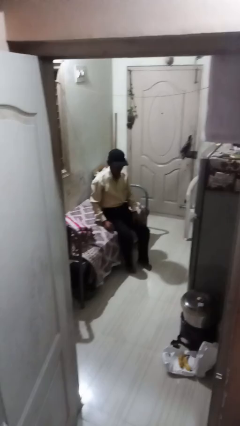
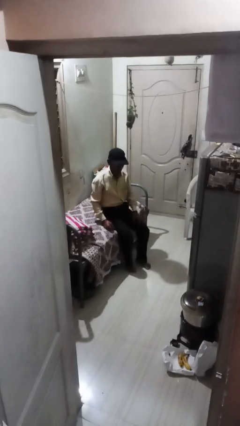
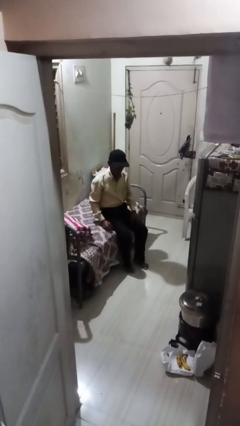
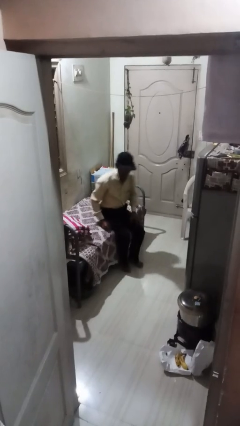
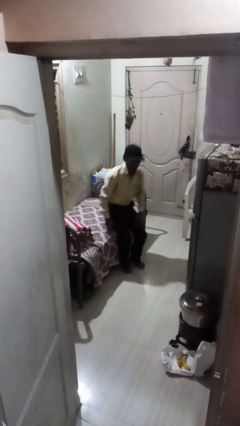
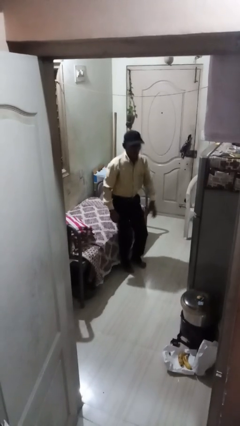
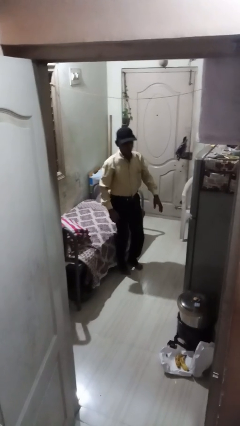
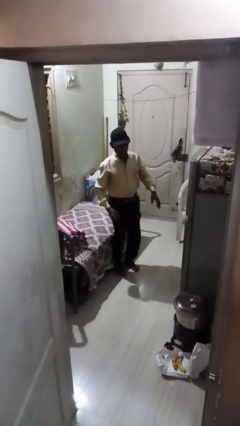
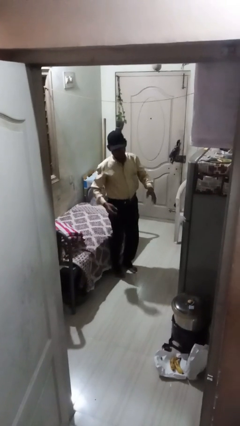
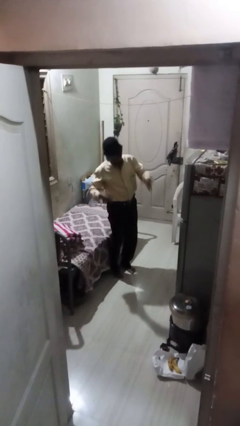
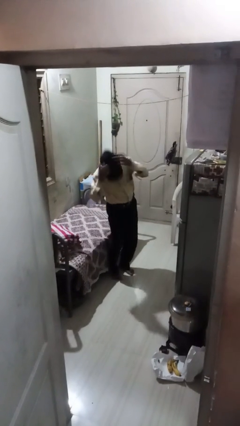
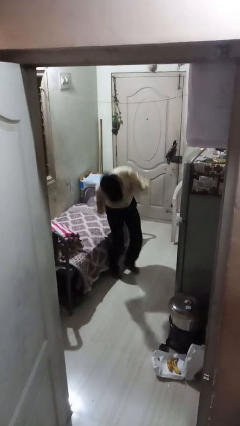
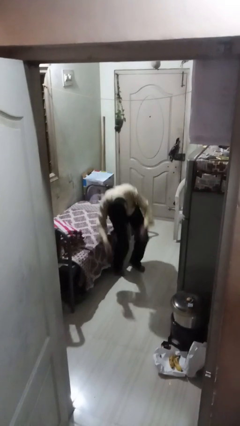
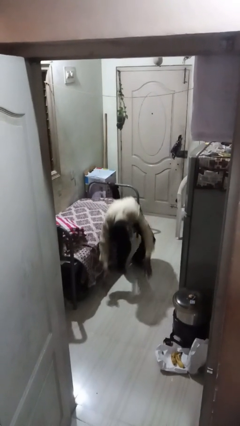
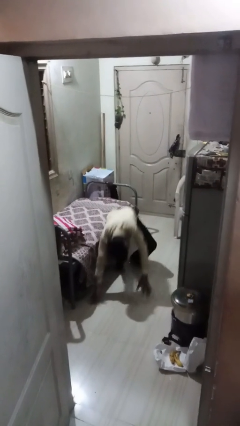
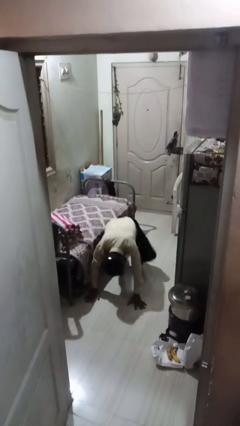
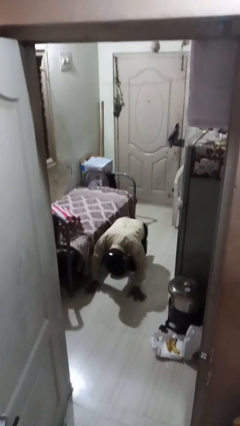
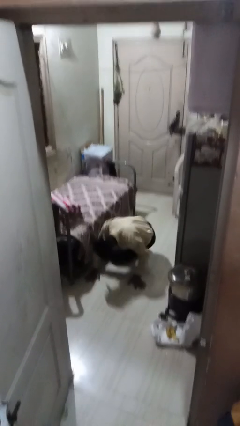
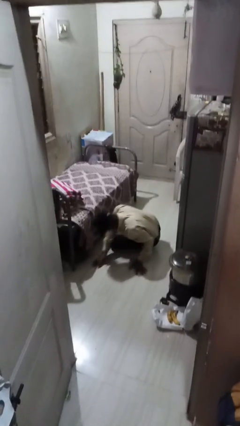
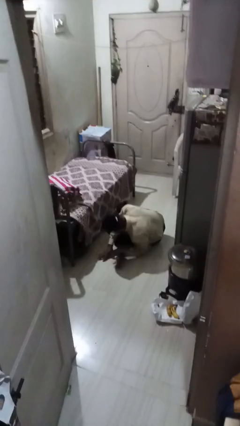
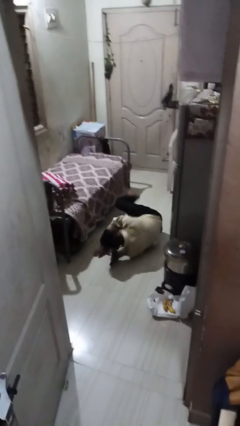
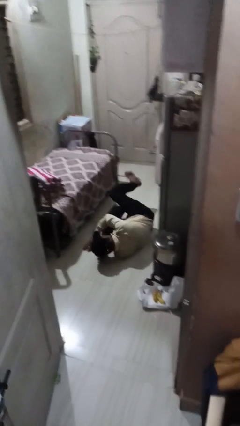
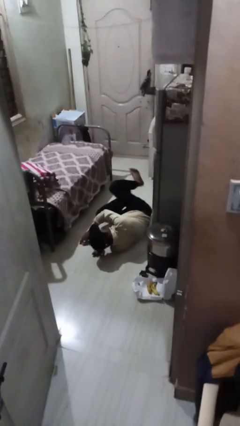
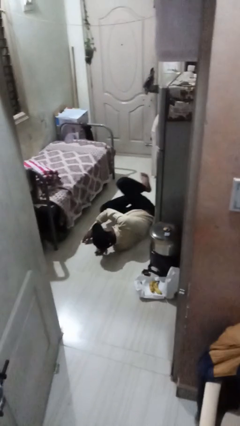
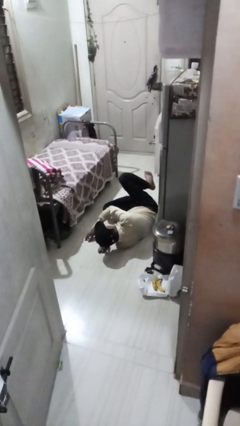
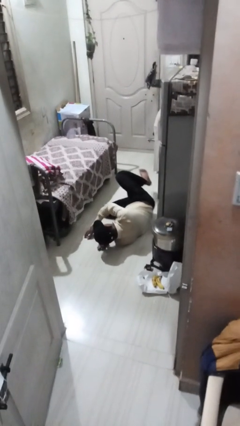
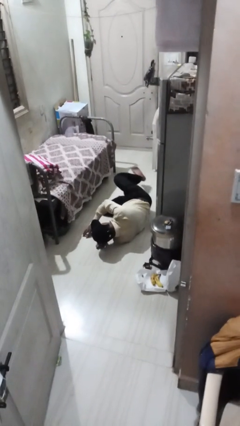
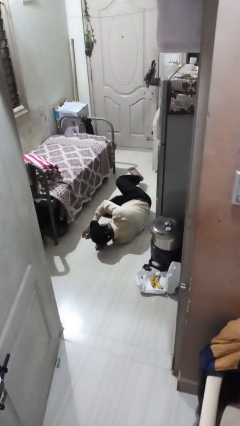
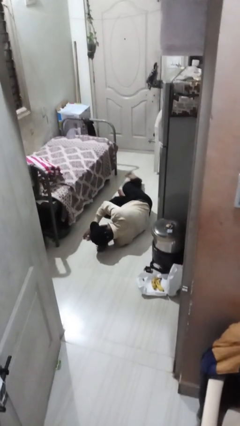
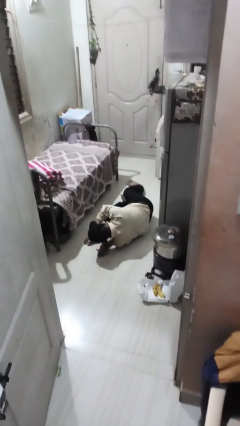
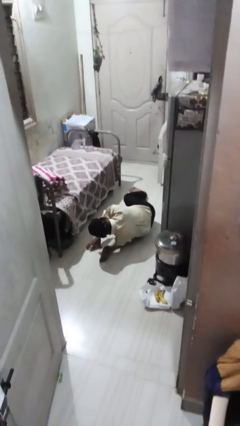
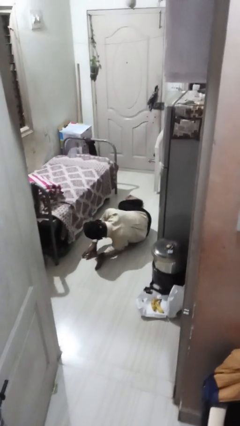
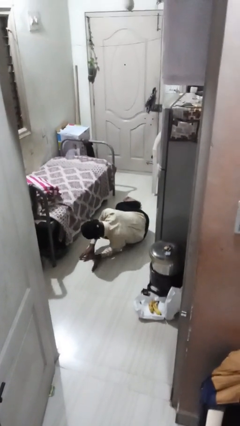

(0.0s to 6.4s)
person falls while standing

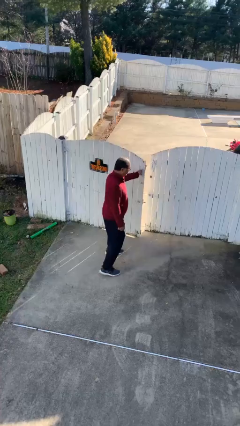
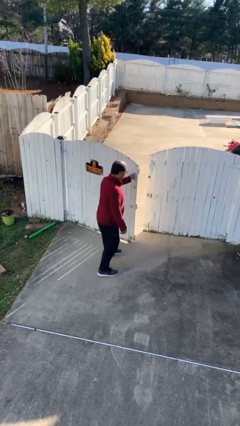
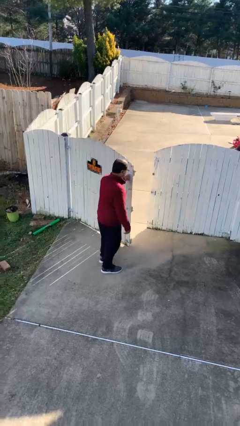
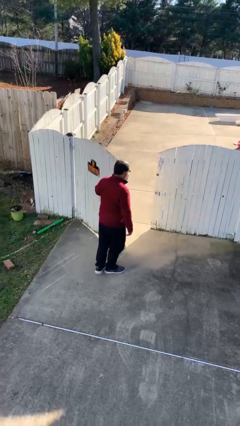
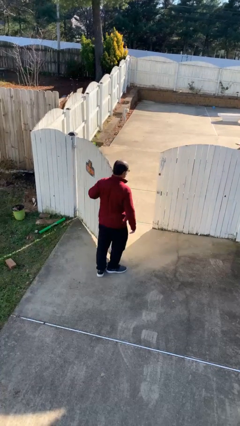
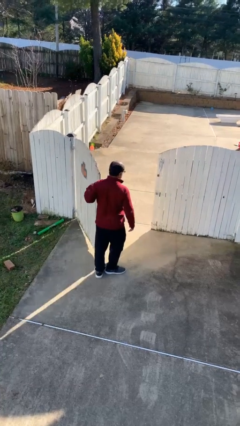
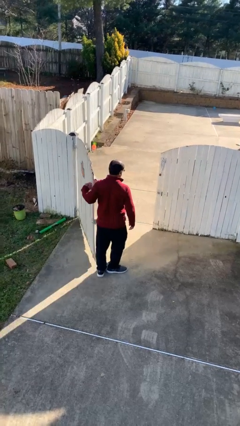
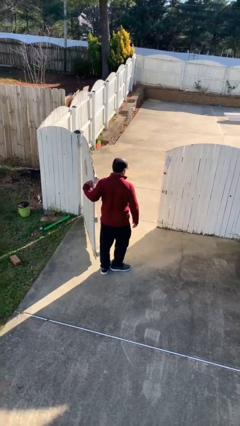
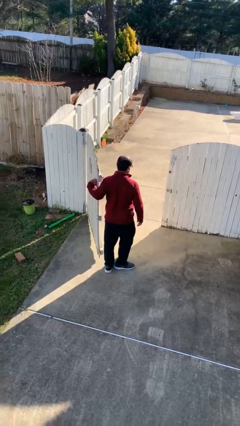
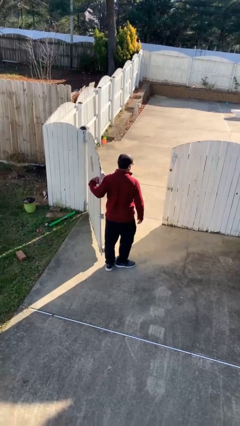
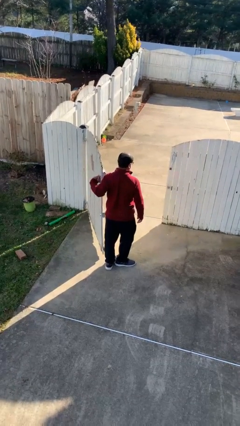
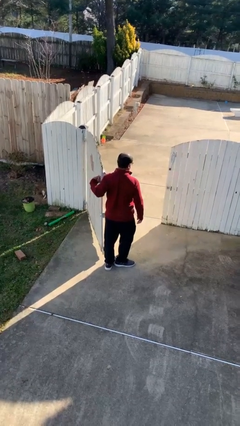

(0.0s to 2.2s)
person opens facility door

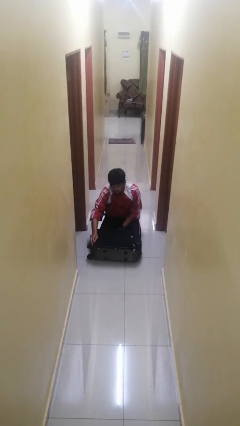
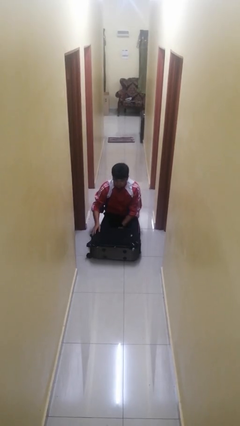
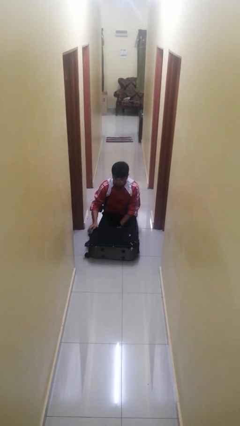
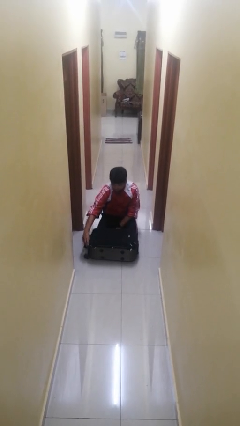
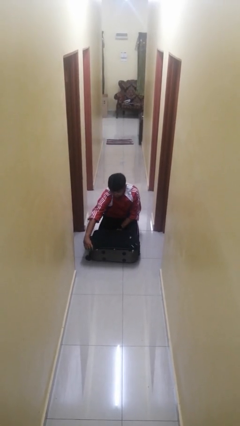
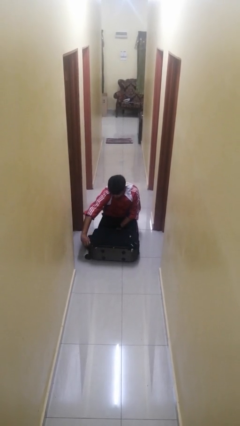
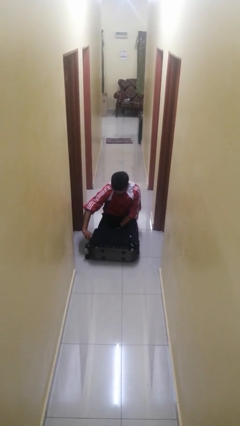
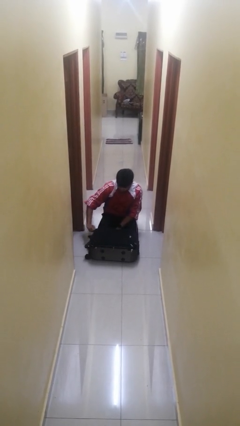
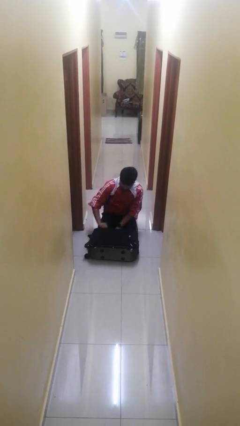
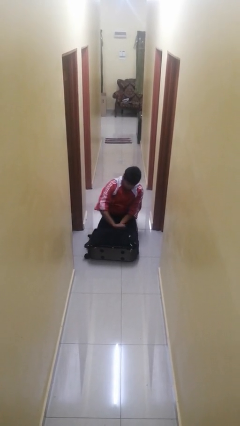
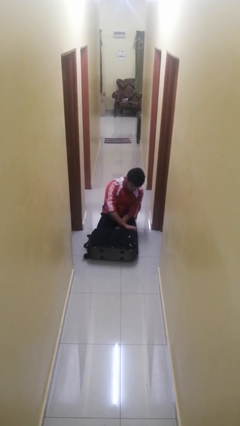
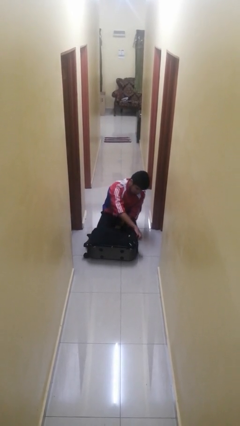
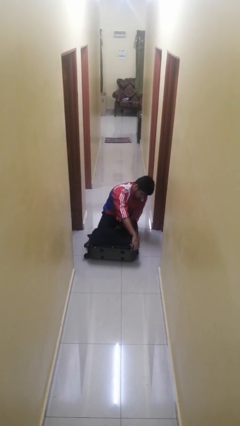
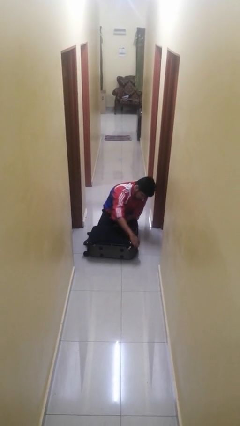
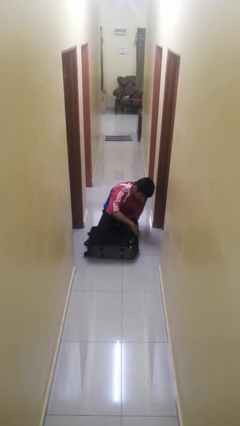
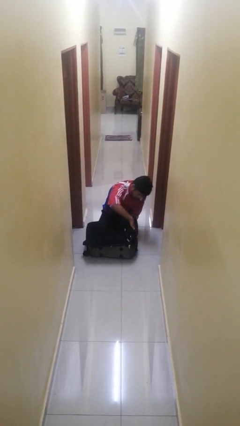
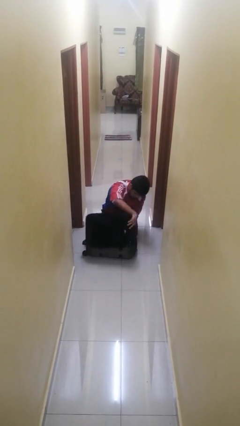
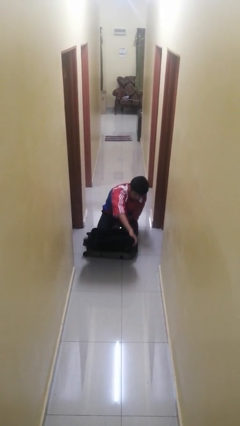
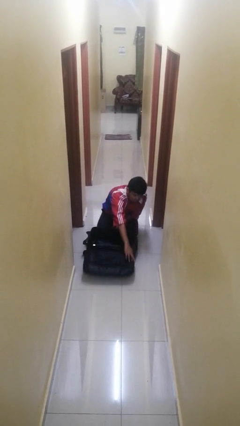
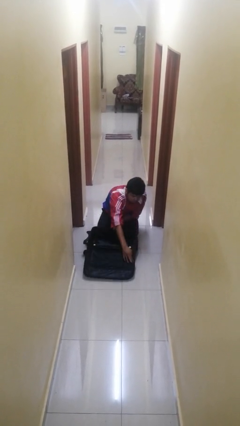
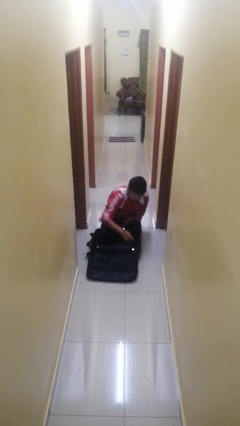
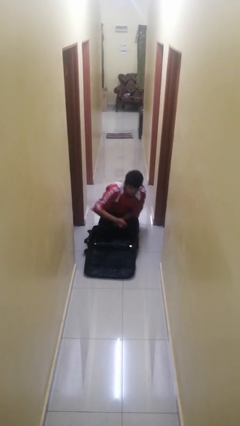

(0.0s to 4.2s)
person opens suitcase

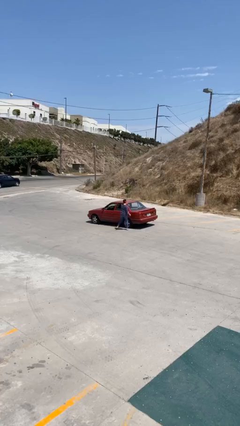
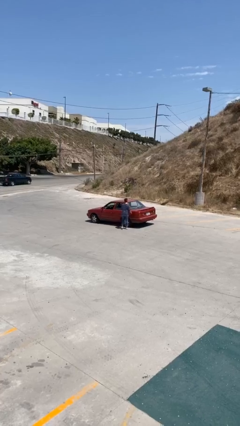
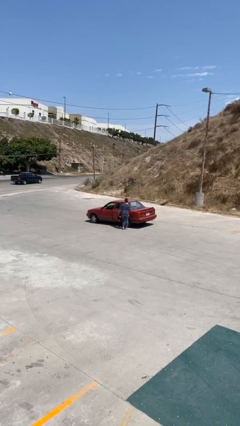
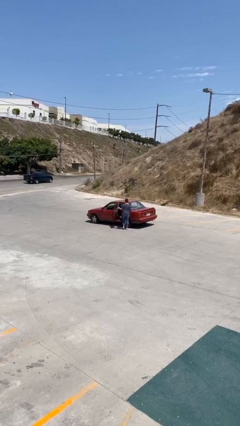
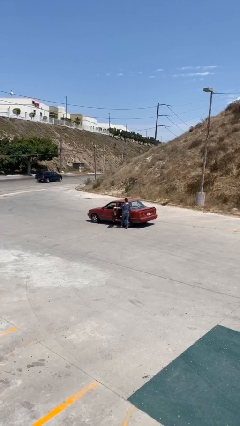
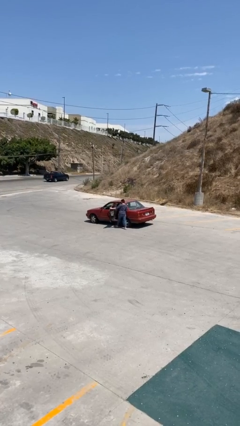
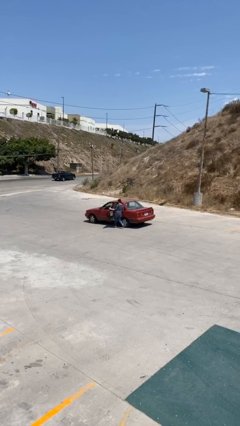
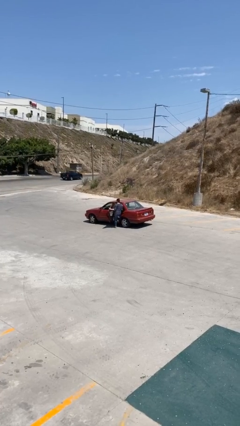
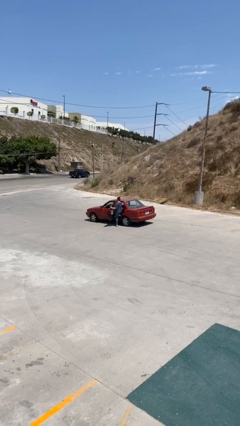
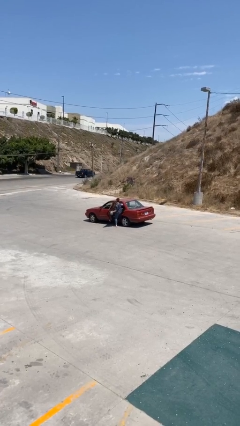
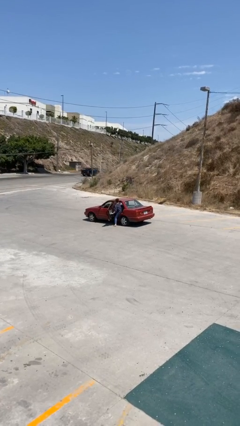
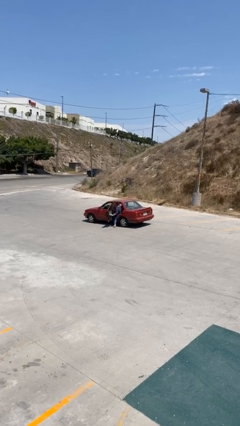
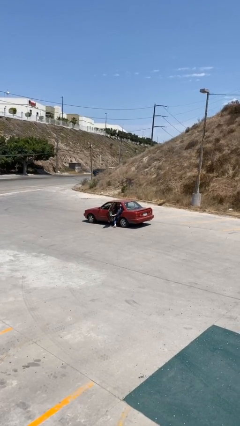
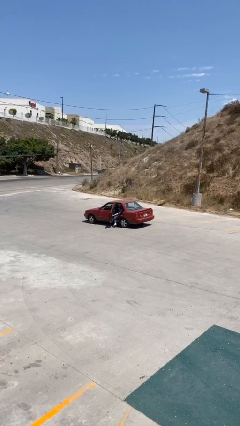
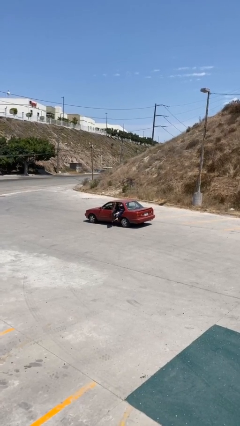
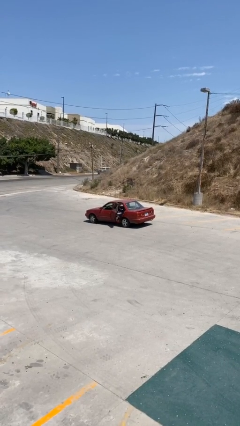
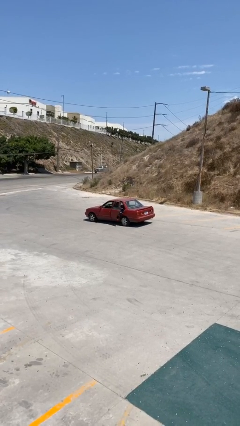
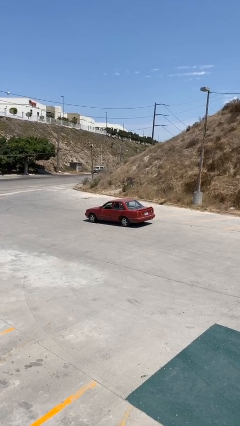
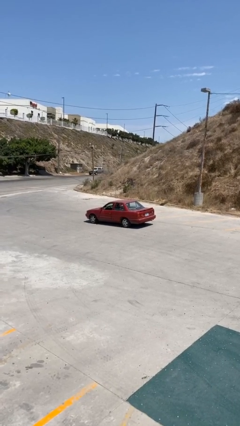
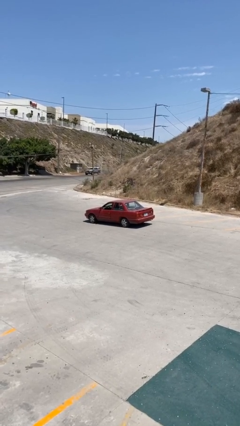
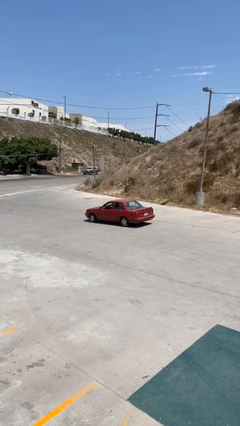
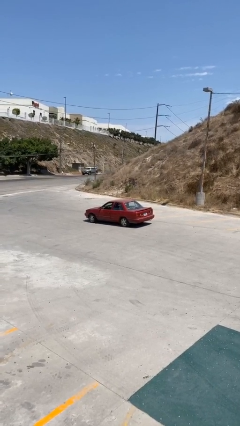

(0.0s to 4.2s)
car drops off person

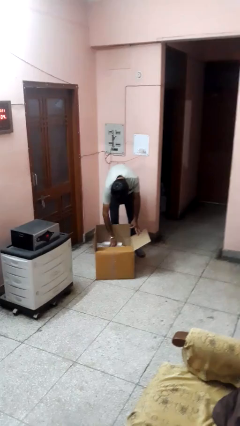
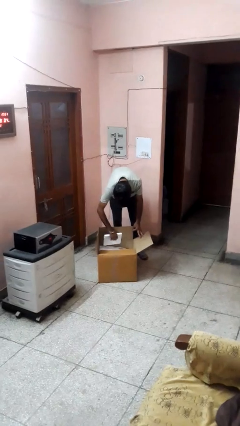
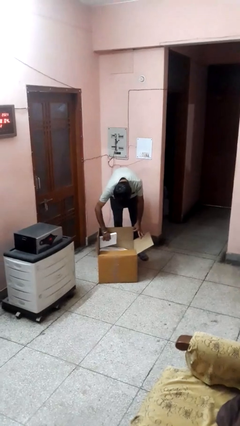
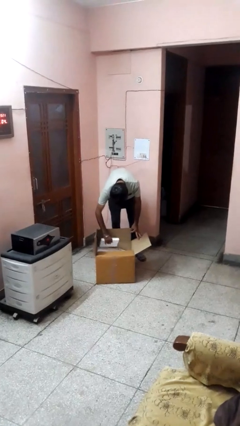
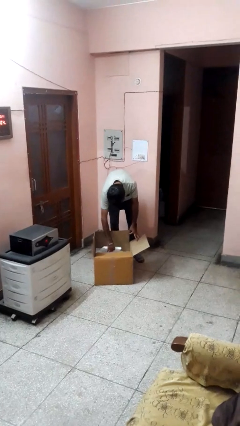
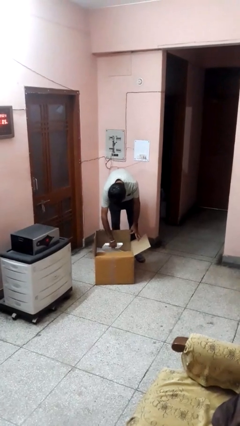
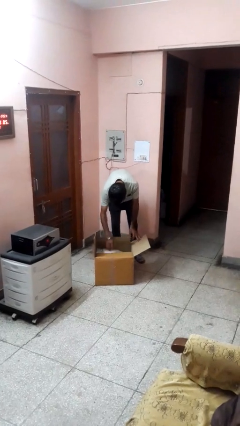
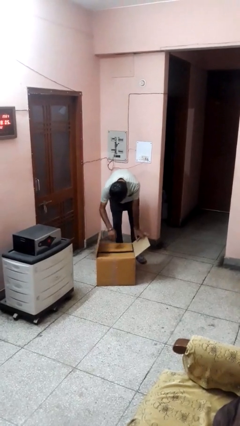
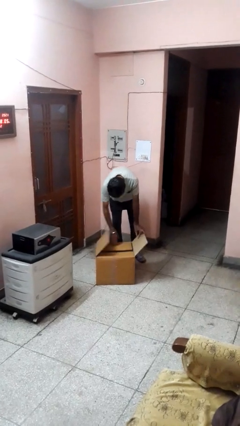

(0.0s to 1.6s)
person searches in box
